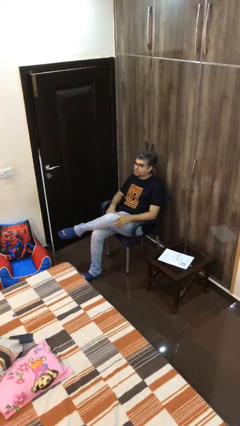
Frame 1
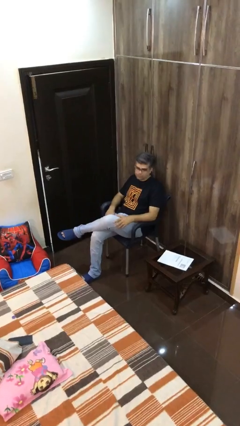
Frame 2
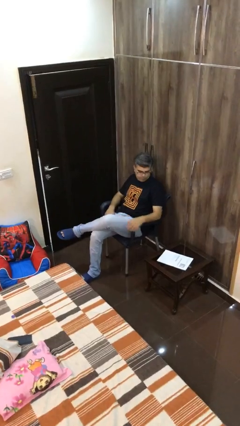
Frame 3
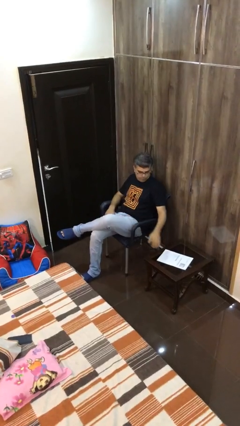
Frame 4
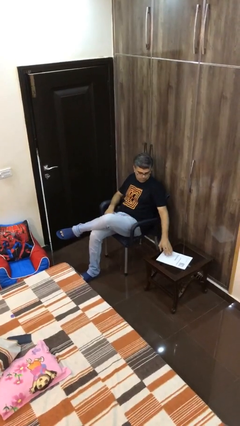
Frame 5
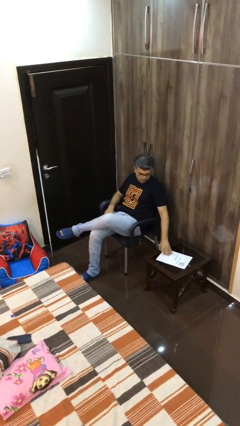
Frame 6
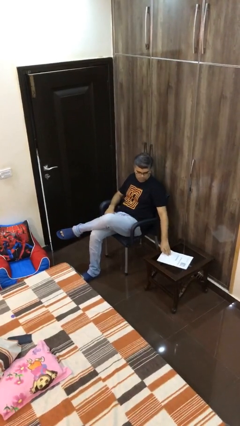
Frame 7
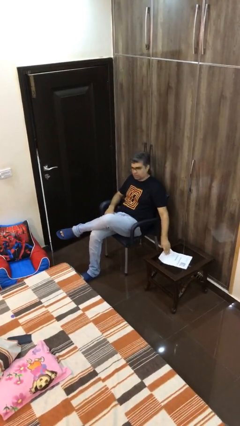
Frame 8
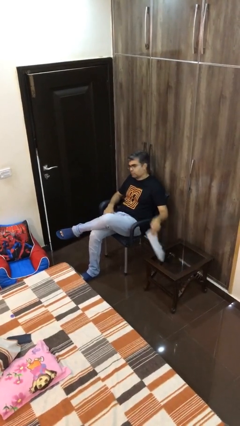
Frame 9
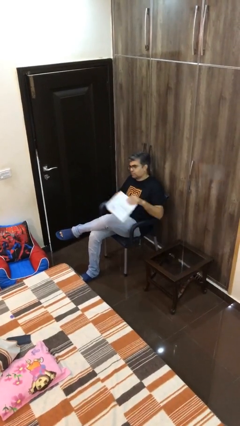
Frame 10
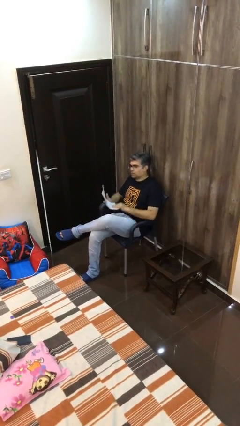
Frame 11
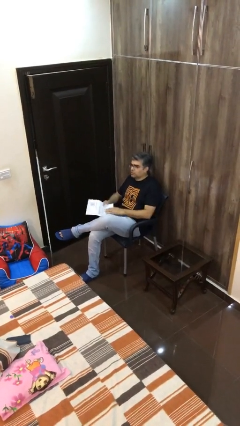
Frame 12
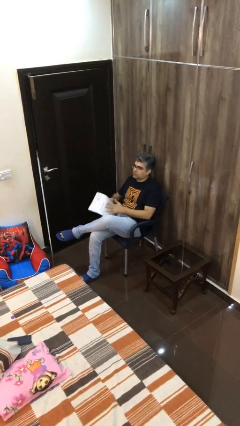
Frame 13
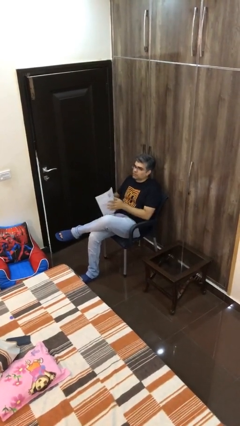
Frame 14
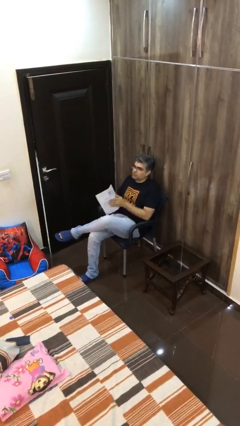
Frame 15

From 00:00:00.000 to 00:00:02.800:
person picks up object from table

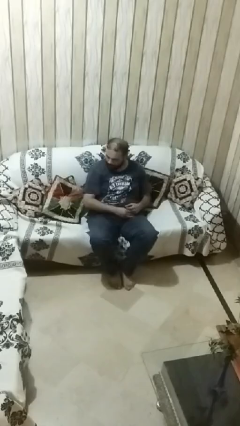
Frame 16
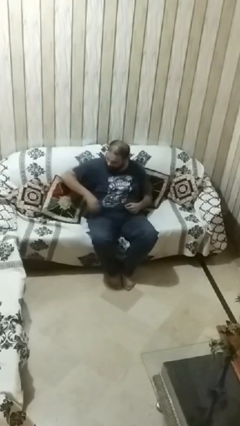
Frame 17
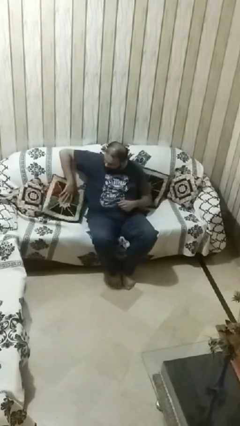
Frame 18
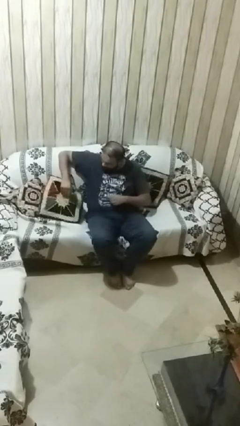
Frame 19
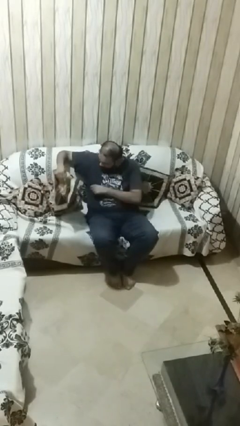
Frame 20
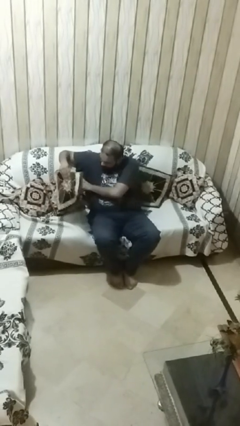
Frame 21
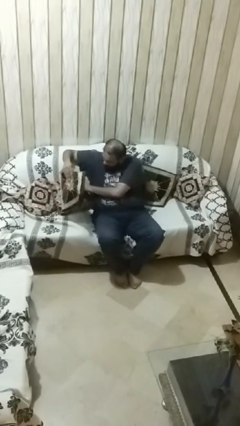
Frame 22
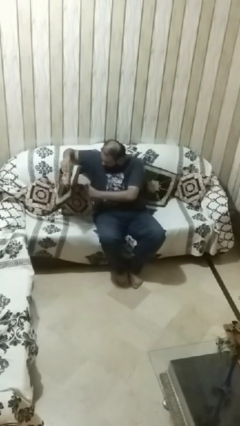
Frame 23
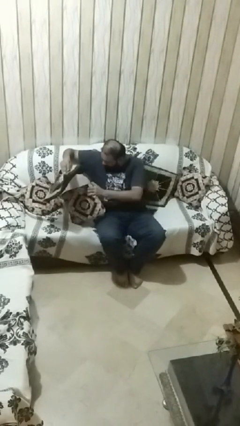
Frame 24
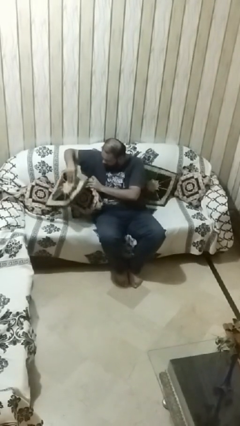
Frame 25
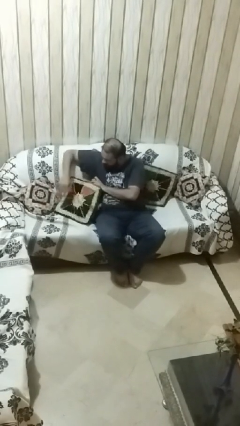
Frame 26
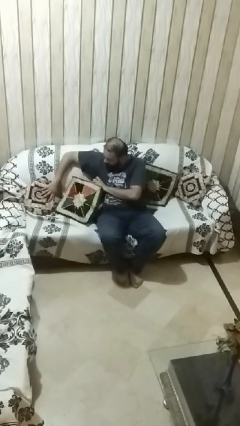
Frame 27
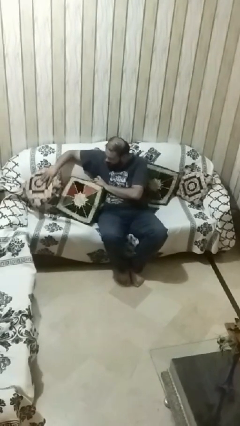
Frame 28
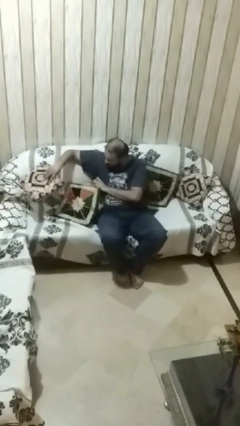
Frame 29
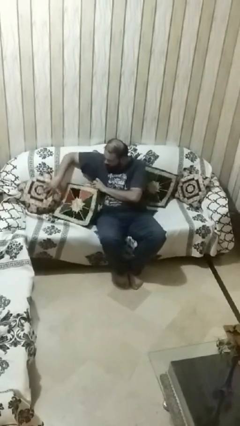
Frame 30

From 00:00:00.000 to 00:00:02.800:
person searches in couch

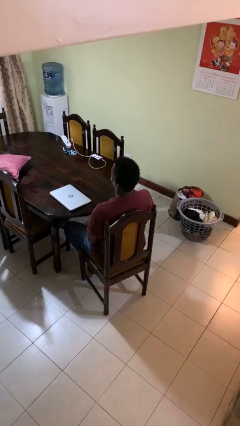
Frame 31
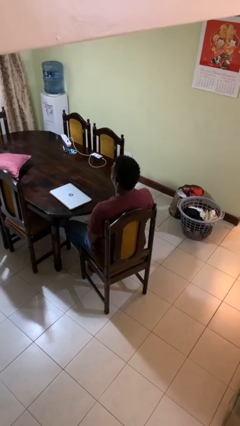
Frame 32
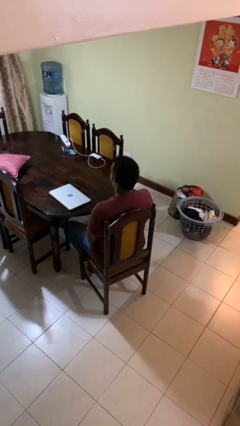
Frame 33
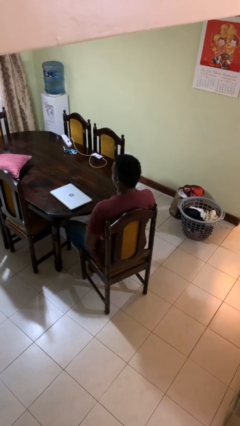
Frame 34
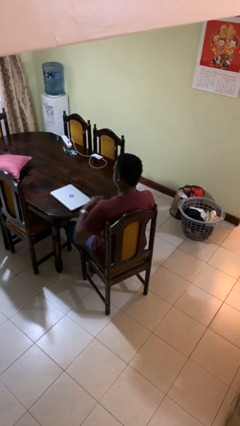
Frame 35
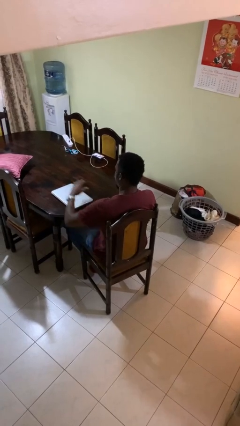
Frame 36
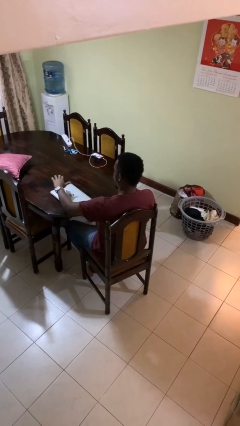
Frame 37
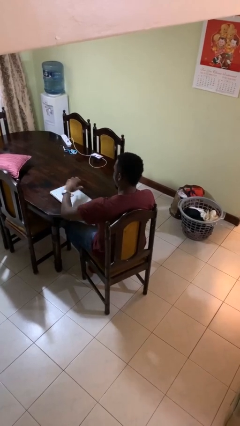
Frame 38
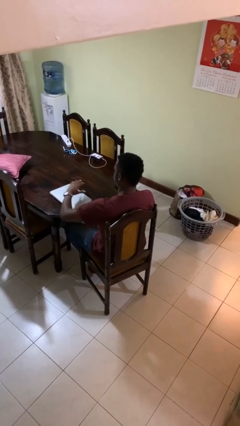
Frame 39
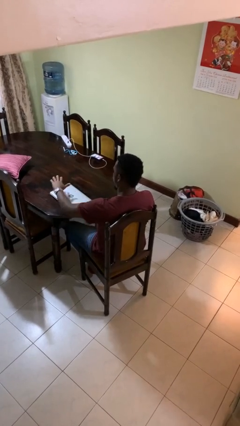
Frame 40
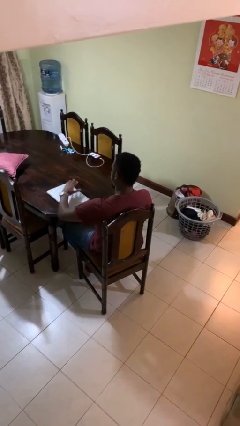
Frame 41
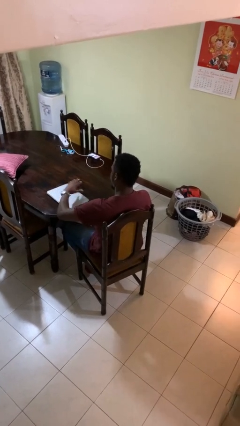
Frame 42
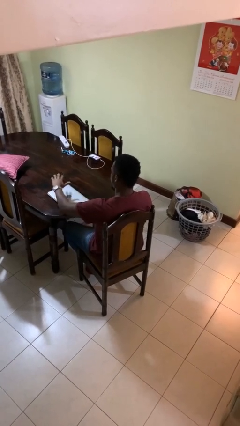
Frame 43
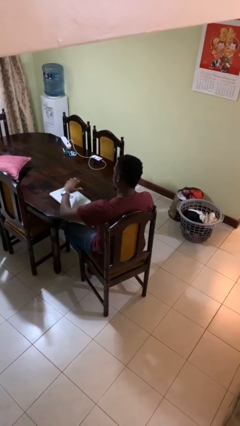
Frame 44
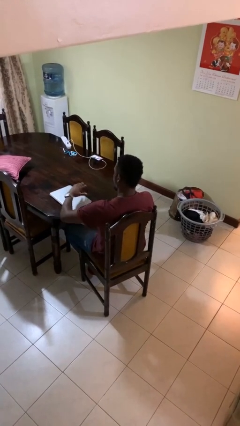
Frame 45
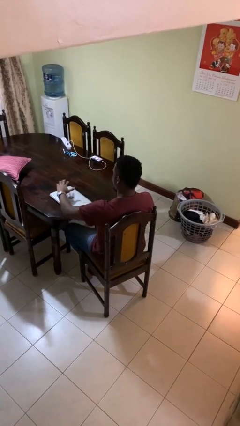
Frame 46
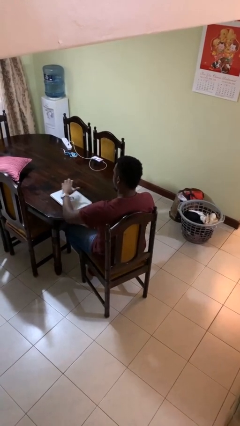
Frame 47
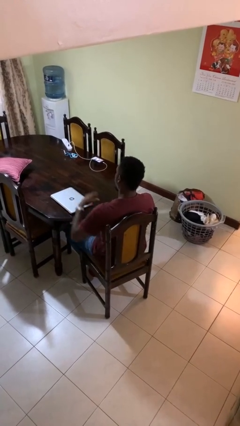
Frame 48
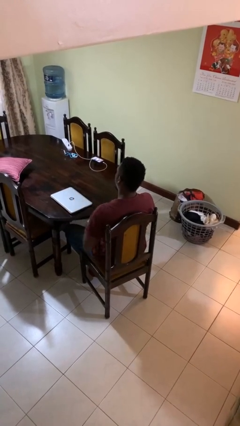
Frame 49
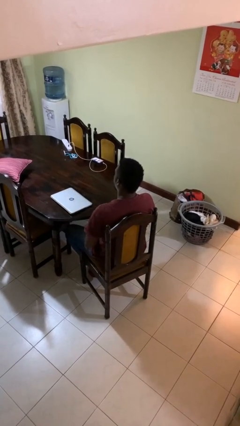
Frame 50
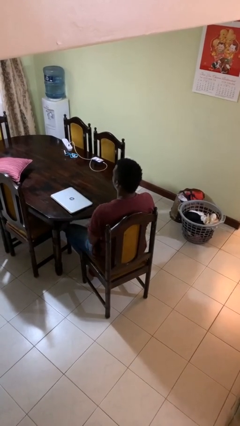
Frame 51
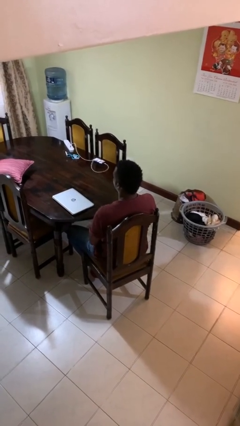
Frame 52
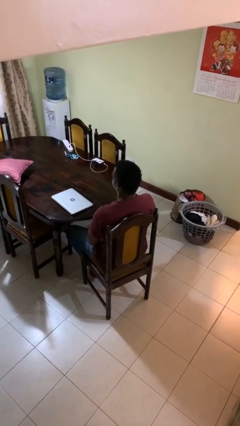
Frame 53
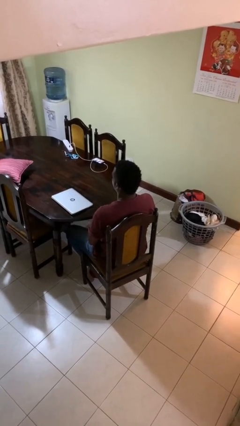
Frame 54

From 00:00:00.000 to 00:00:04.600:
person waves hand over object

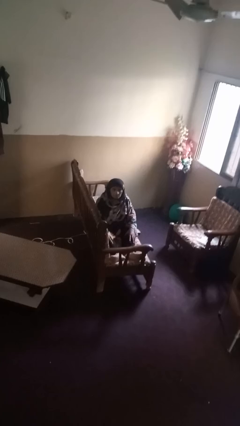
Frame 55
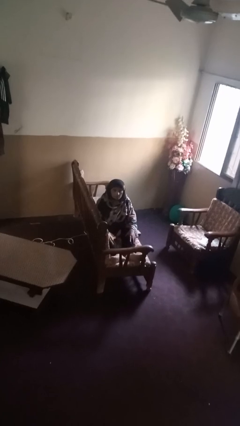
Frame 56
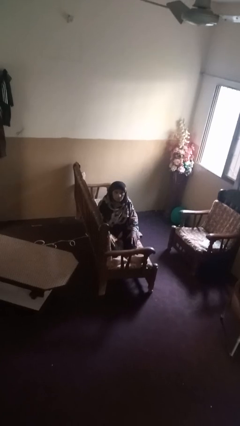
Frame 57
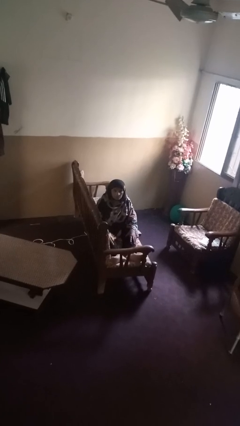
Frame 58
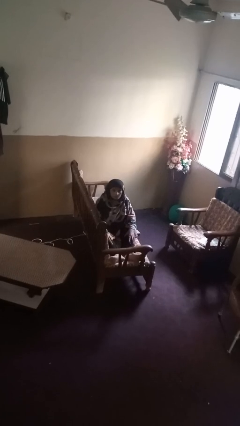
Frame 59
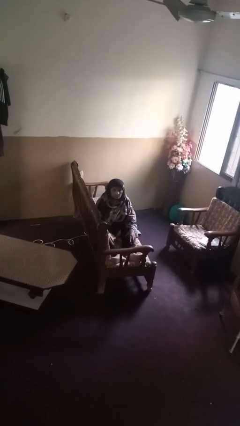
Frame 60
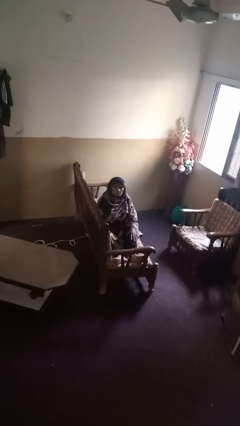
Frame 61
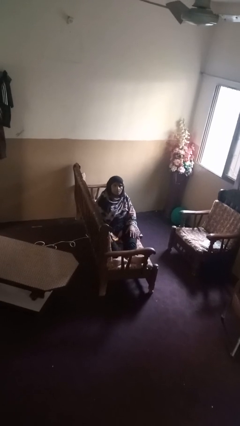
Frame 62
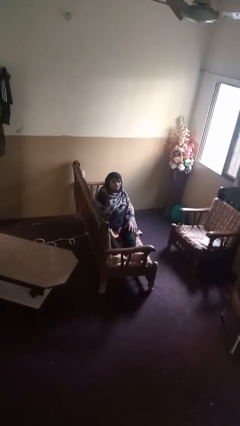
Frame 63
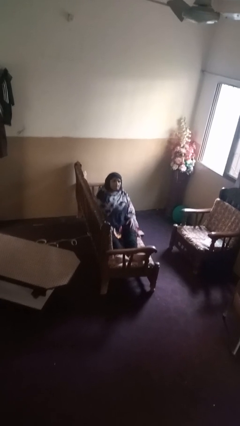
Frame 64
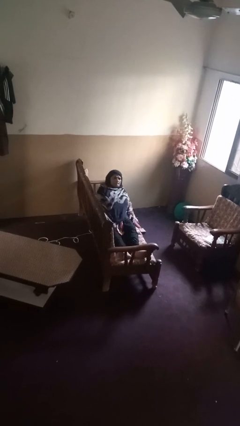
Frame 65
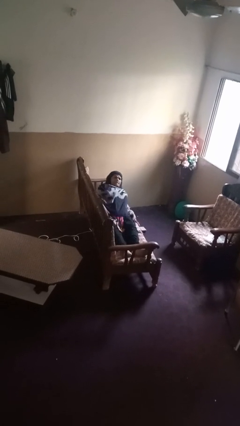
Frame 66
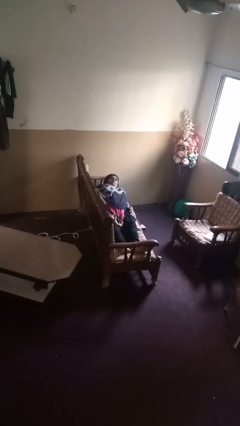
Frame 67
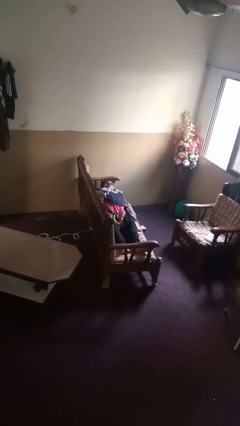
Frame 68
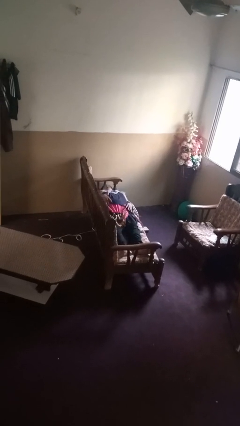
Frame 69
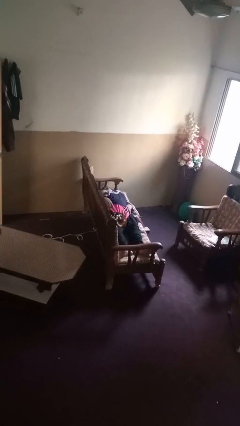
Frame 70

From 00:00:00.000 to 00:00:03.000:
person lies down on couch

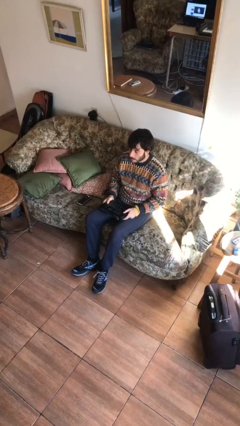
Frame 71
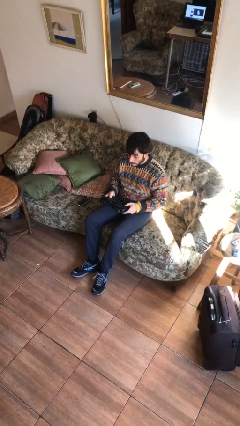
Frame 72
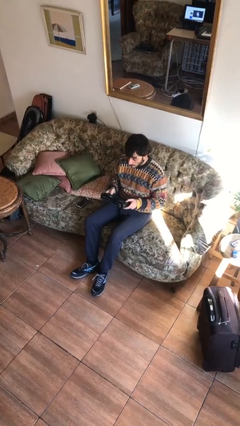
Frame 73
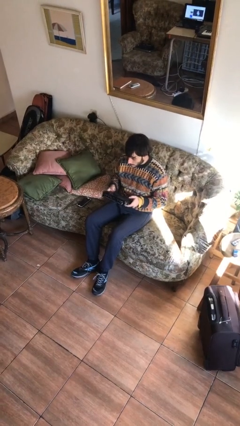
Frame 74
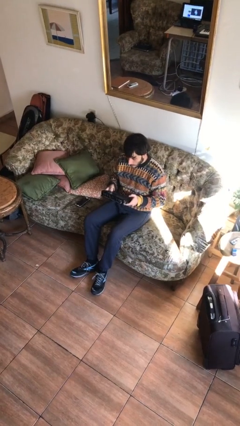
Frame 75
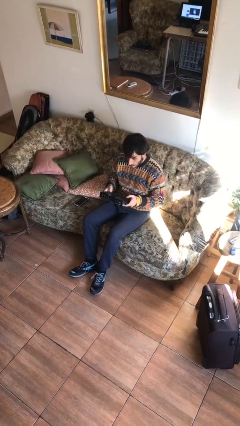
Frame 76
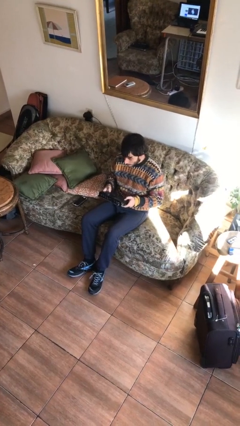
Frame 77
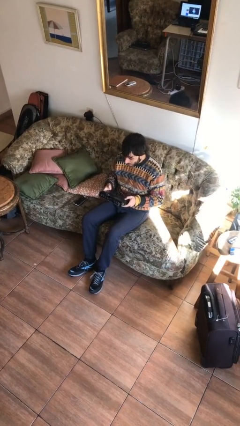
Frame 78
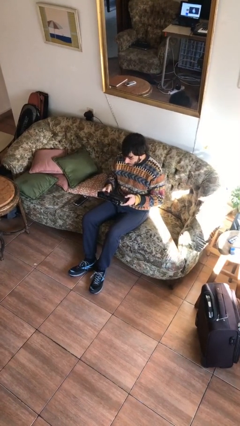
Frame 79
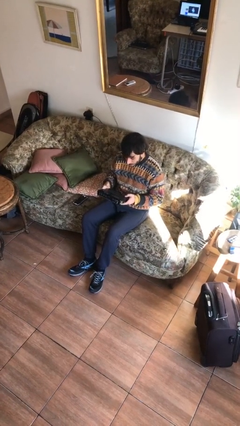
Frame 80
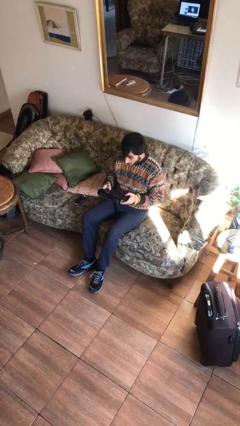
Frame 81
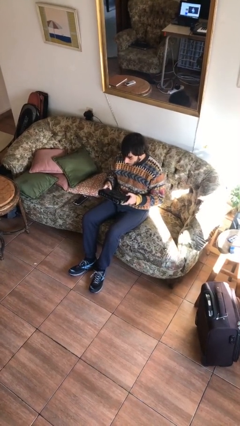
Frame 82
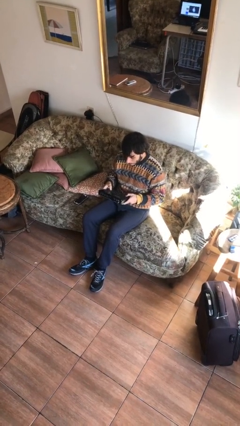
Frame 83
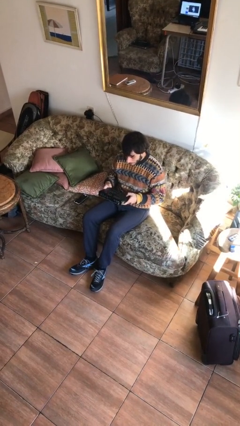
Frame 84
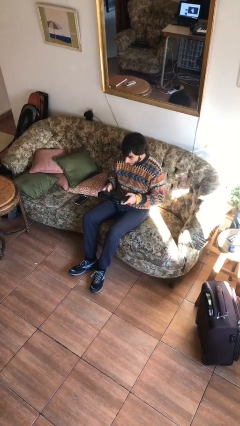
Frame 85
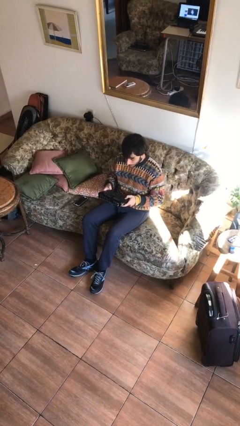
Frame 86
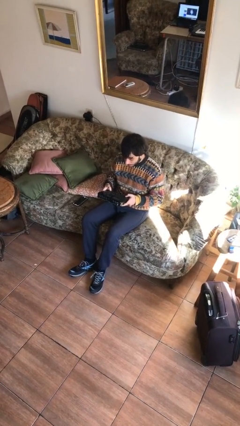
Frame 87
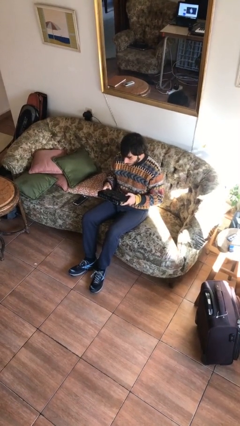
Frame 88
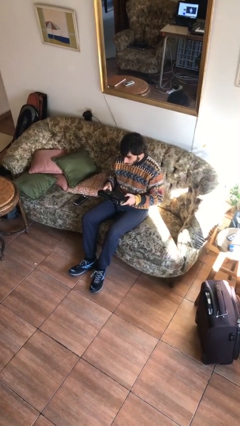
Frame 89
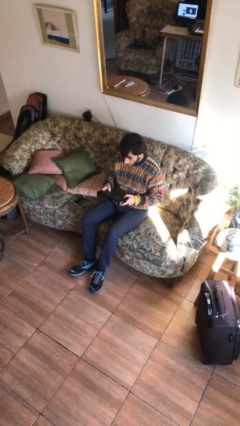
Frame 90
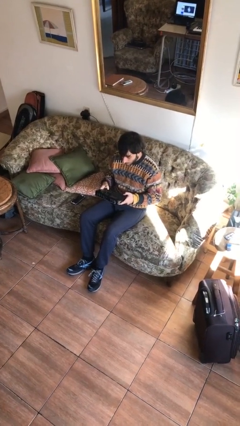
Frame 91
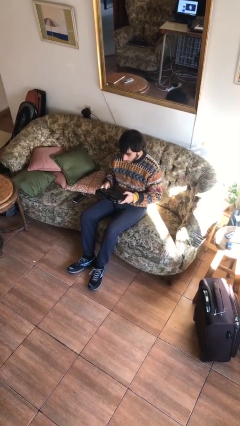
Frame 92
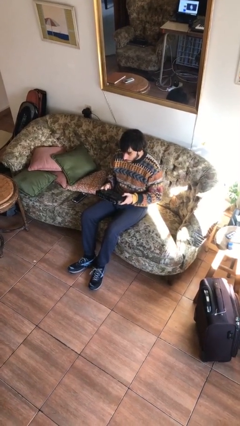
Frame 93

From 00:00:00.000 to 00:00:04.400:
person interacts with handheld game
